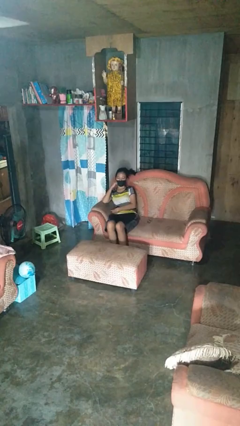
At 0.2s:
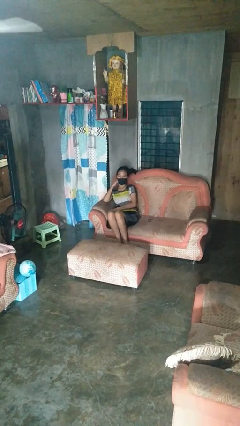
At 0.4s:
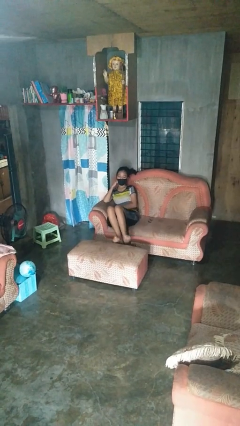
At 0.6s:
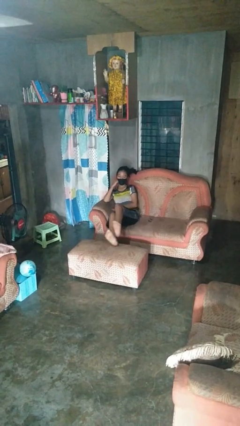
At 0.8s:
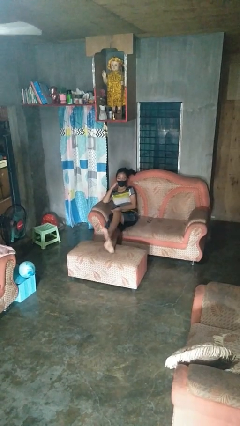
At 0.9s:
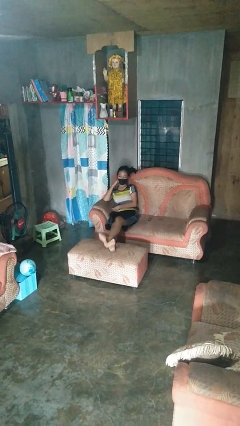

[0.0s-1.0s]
person puts feet up

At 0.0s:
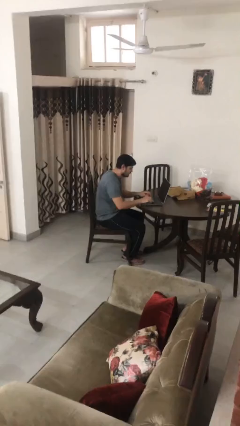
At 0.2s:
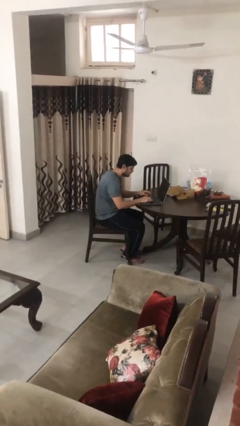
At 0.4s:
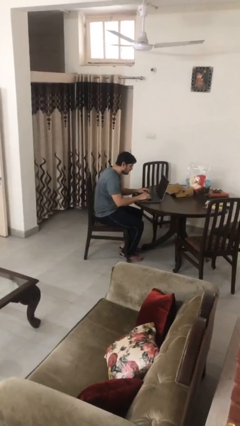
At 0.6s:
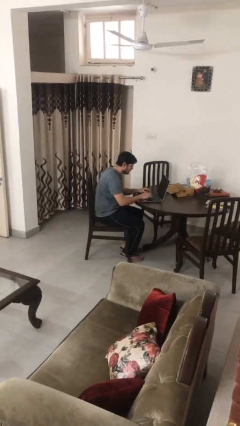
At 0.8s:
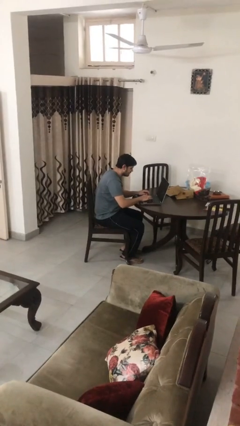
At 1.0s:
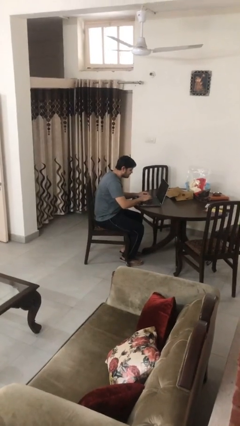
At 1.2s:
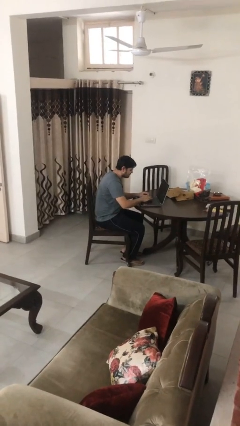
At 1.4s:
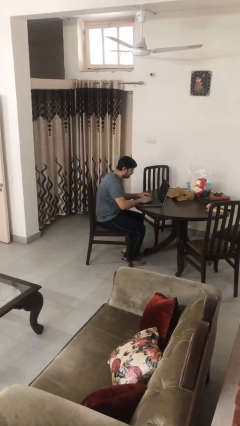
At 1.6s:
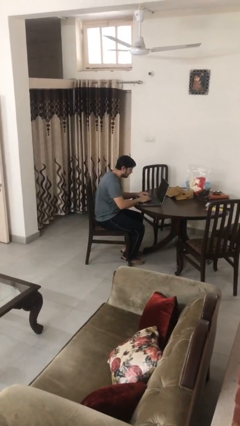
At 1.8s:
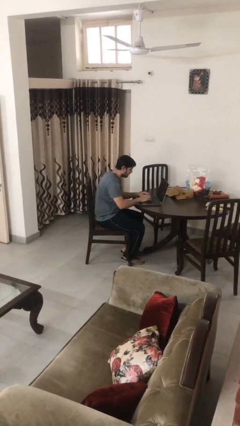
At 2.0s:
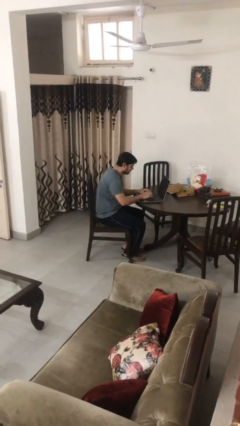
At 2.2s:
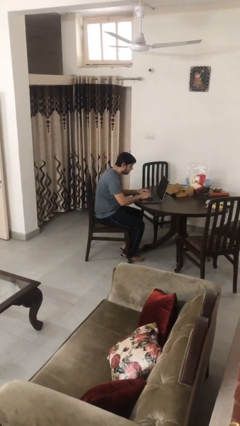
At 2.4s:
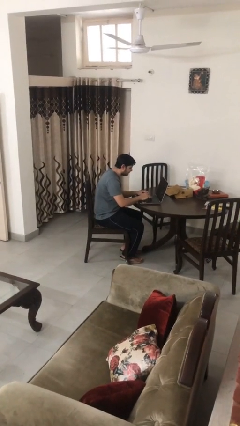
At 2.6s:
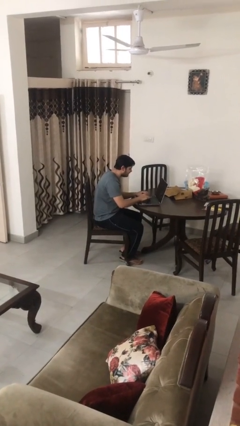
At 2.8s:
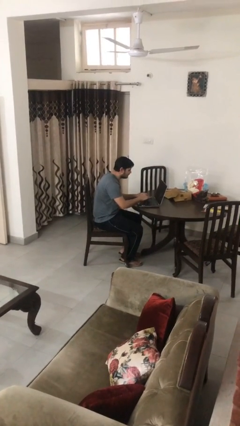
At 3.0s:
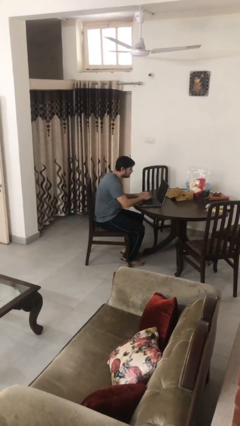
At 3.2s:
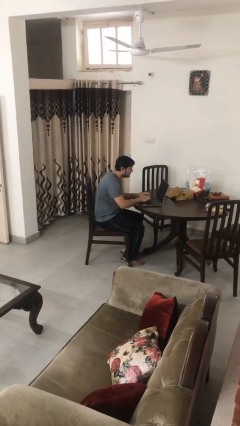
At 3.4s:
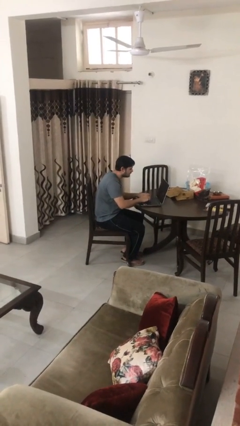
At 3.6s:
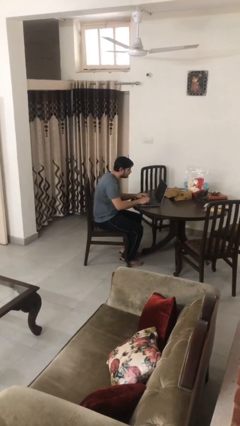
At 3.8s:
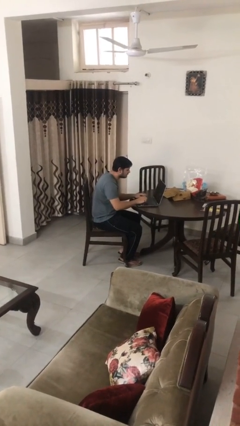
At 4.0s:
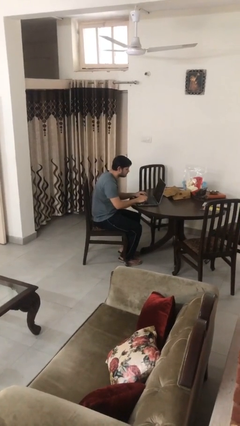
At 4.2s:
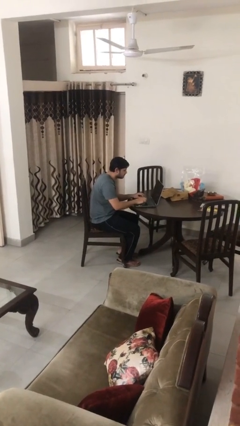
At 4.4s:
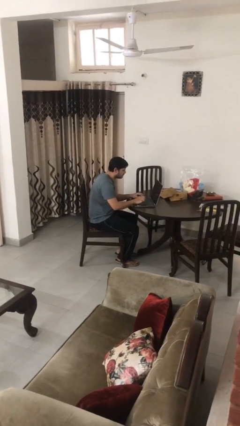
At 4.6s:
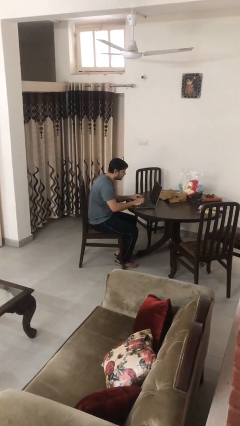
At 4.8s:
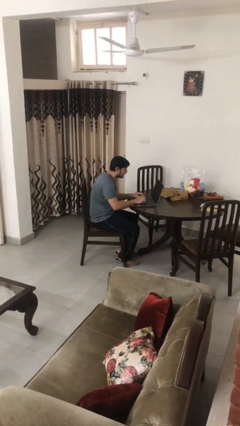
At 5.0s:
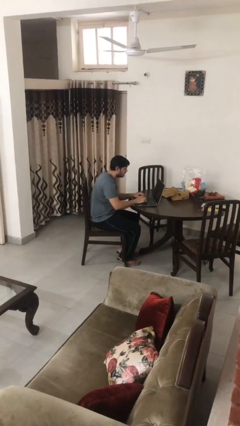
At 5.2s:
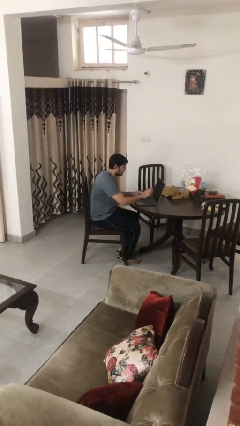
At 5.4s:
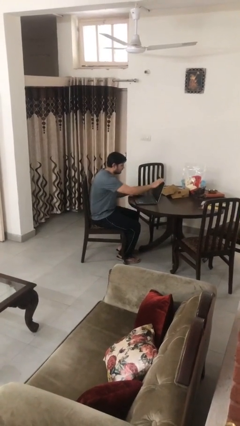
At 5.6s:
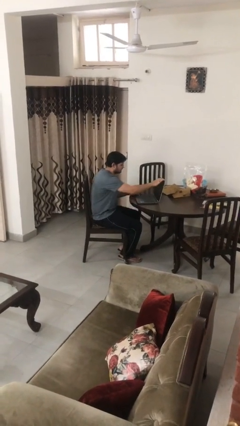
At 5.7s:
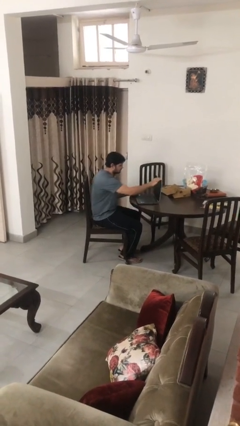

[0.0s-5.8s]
person interacts with laptop

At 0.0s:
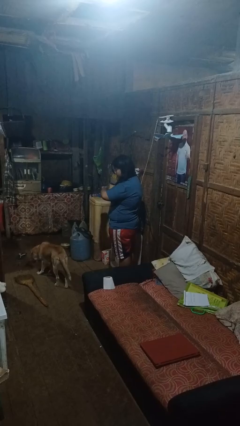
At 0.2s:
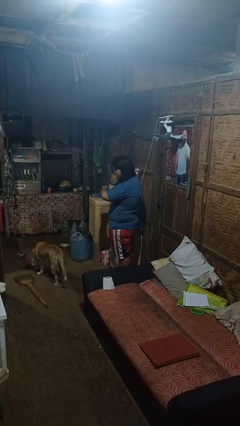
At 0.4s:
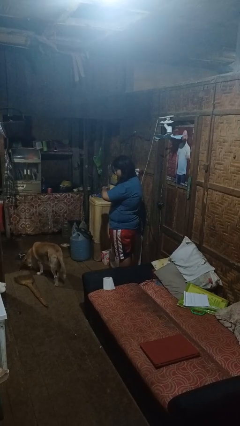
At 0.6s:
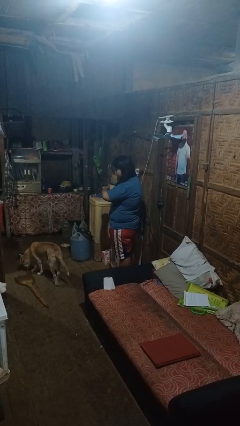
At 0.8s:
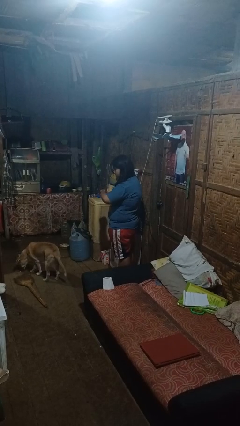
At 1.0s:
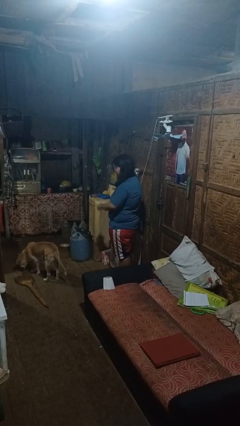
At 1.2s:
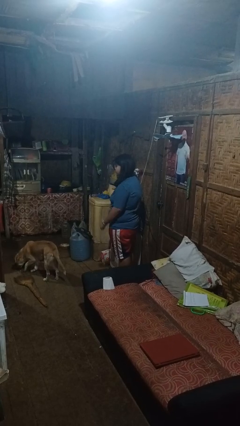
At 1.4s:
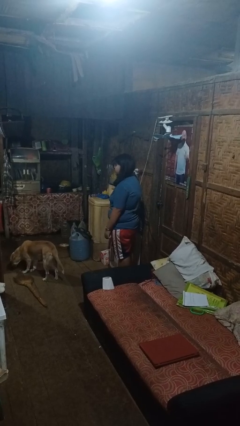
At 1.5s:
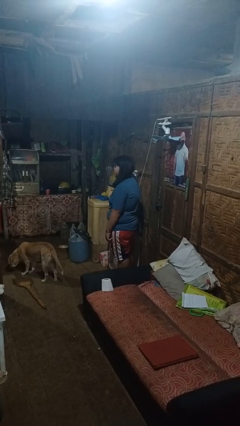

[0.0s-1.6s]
person looks at wristwatch

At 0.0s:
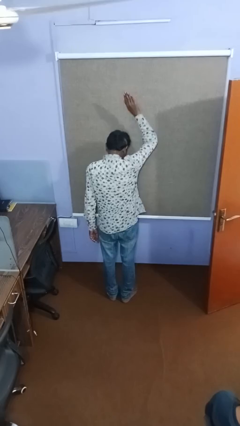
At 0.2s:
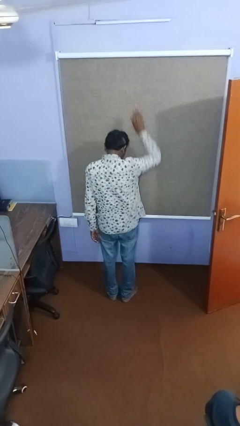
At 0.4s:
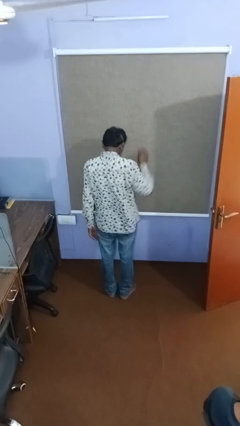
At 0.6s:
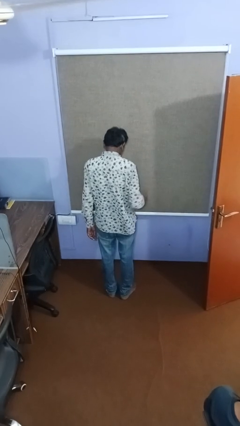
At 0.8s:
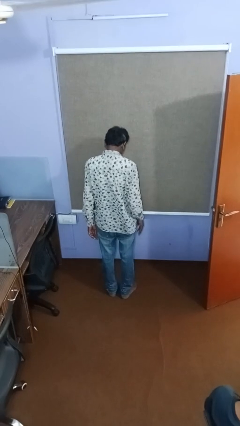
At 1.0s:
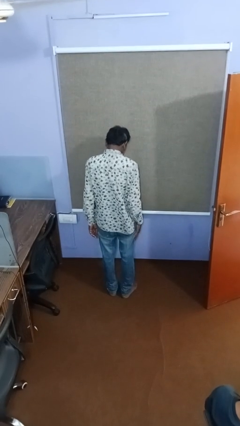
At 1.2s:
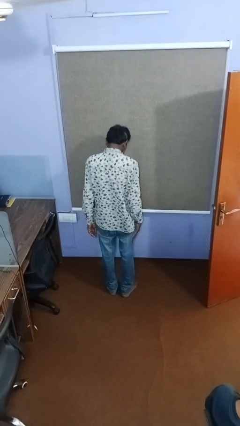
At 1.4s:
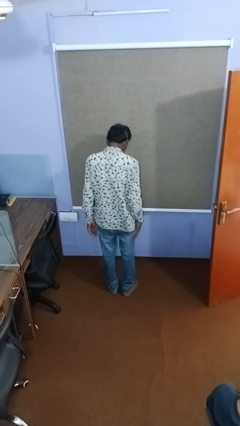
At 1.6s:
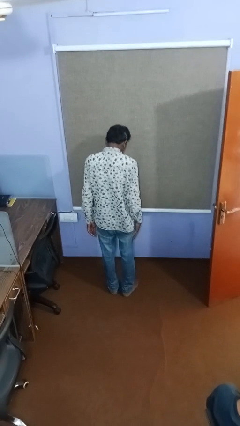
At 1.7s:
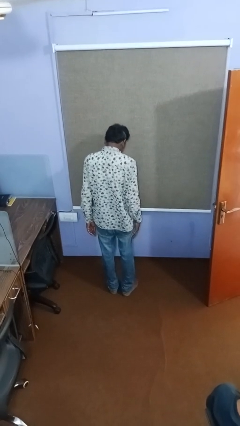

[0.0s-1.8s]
person gestures lower hand

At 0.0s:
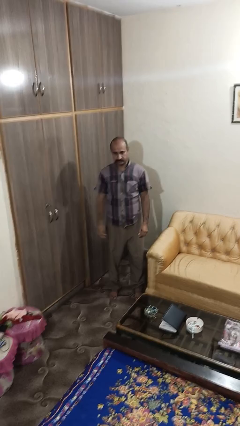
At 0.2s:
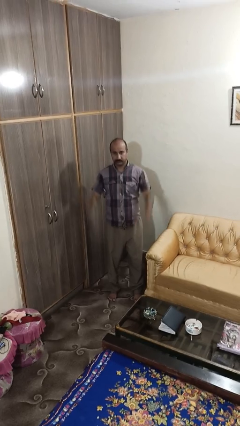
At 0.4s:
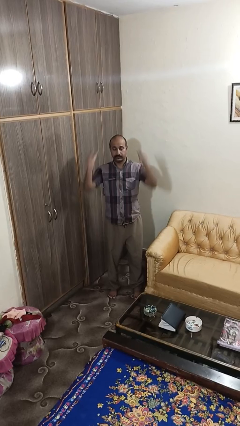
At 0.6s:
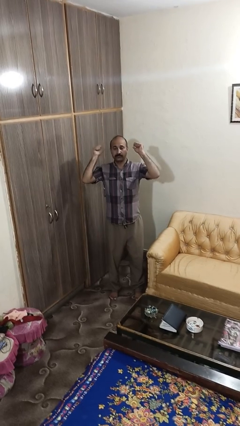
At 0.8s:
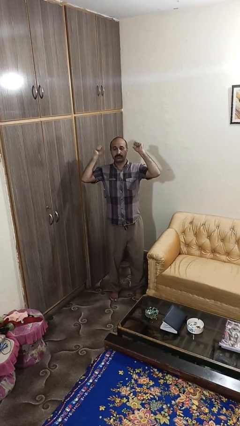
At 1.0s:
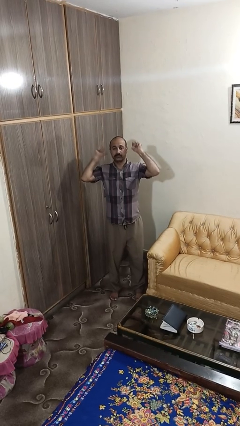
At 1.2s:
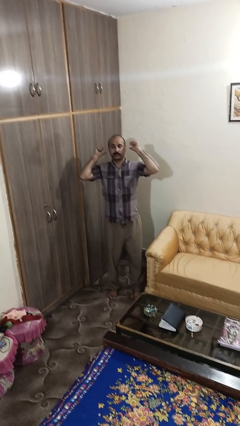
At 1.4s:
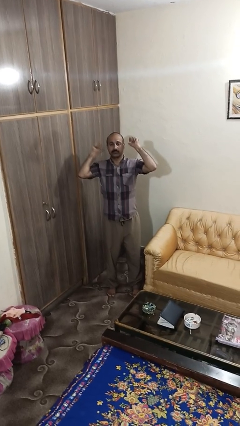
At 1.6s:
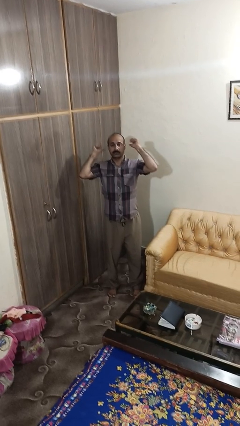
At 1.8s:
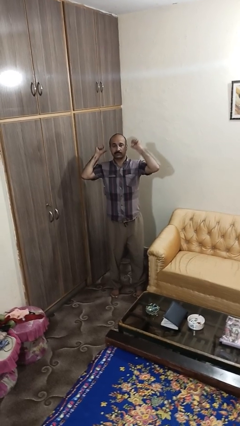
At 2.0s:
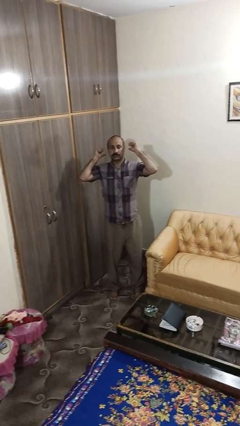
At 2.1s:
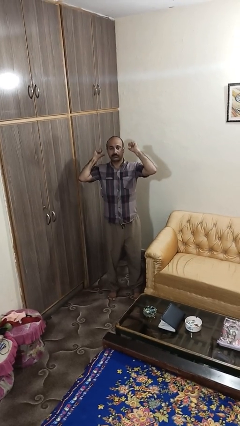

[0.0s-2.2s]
person gestures behind me

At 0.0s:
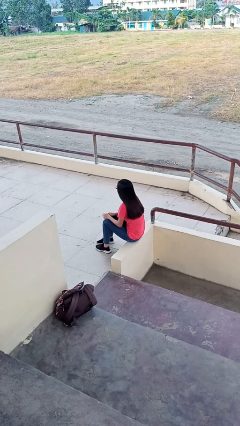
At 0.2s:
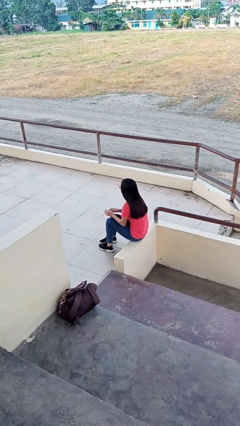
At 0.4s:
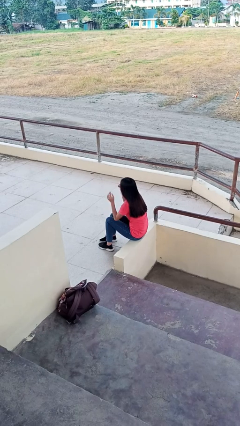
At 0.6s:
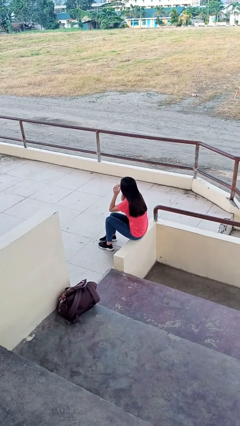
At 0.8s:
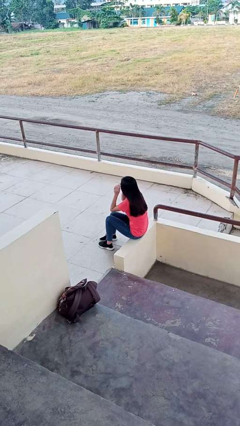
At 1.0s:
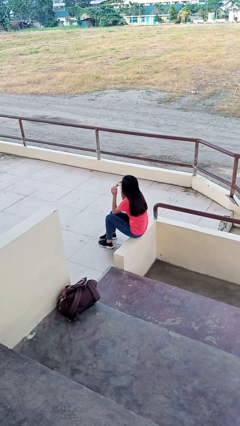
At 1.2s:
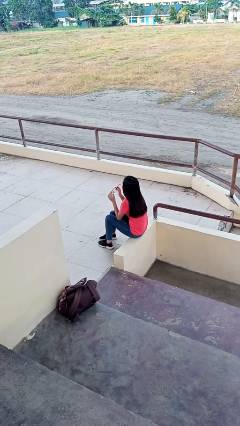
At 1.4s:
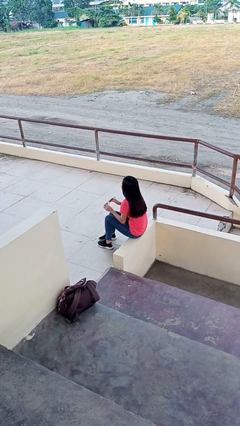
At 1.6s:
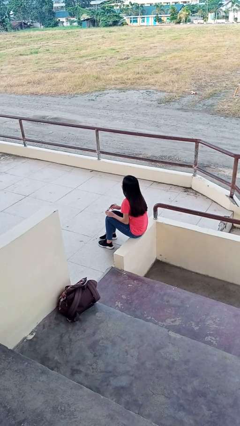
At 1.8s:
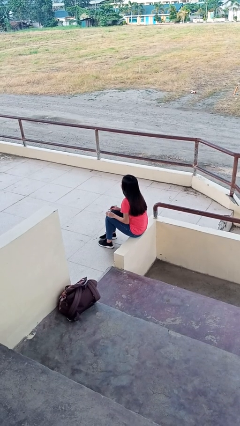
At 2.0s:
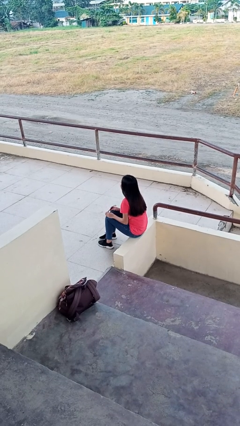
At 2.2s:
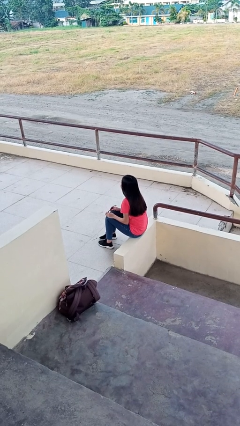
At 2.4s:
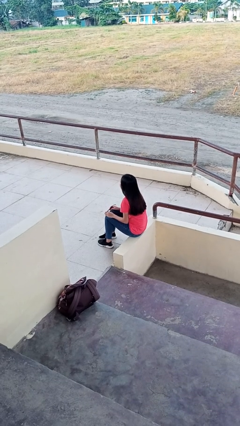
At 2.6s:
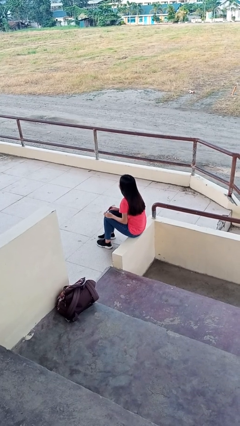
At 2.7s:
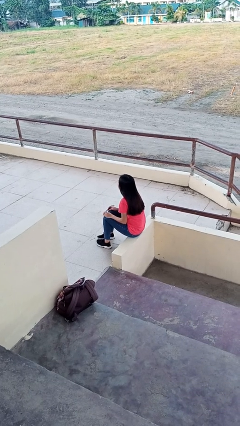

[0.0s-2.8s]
person takes off glasses

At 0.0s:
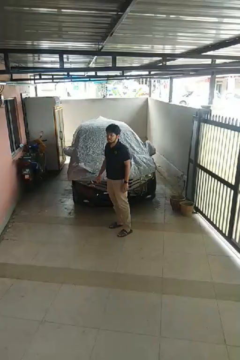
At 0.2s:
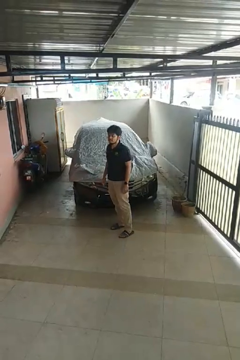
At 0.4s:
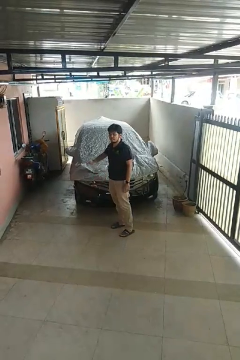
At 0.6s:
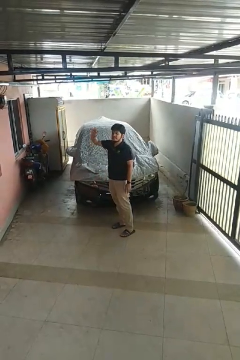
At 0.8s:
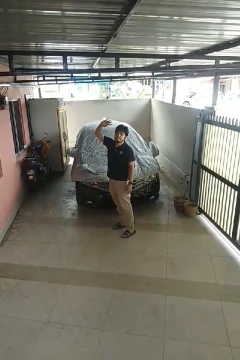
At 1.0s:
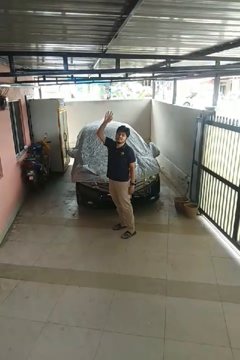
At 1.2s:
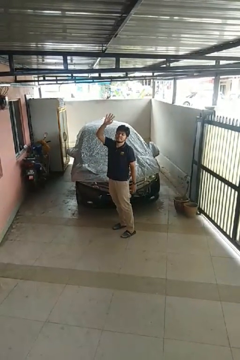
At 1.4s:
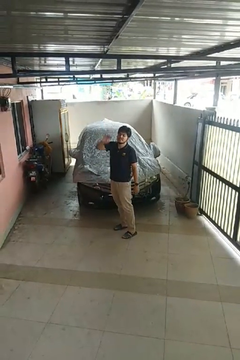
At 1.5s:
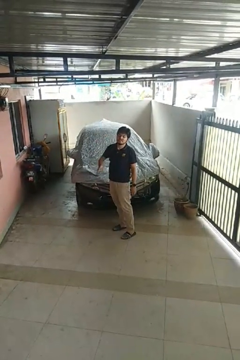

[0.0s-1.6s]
person waves at person

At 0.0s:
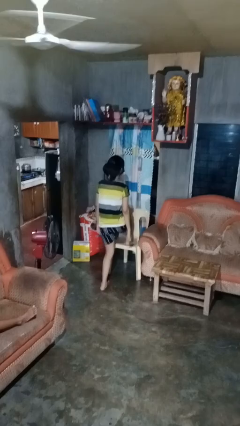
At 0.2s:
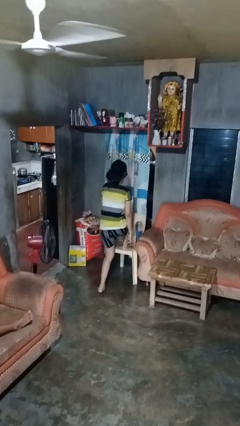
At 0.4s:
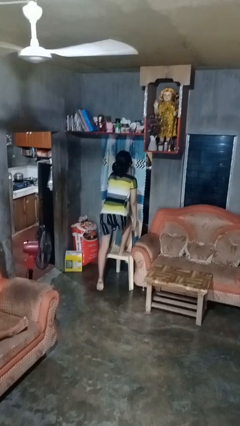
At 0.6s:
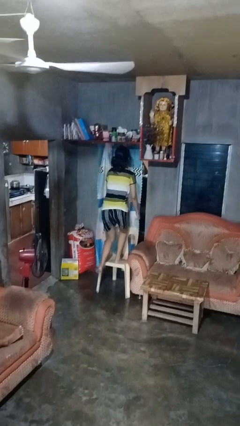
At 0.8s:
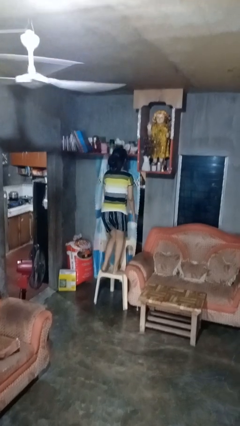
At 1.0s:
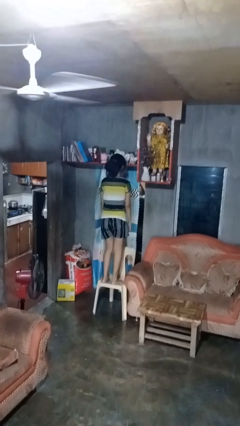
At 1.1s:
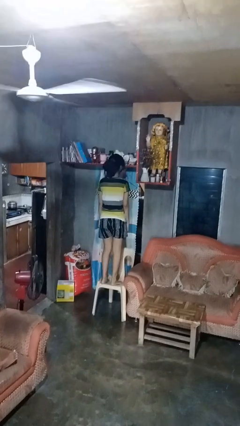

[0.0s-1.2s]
person climbs on chair
